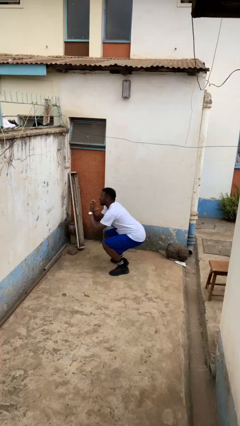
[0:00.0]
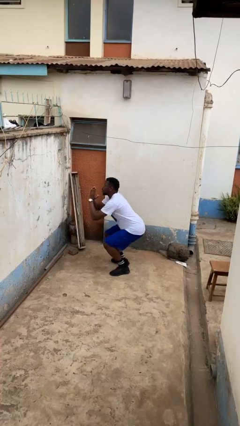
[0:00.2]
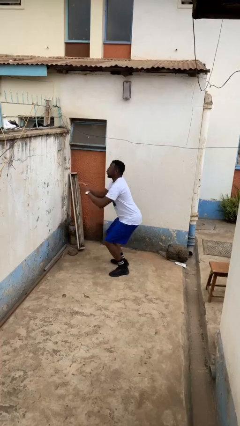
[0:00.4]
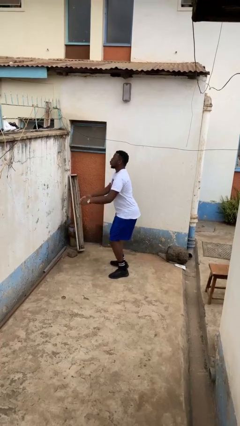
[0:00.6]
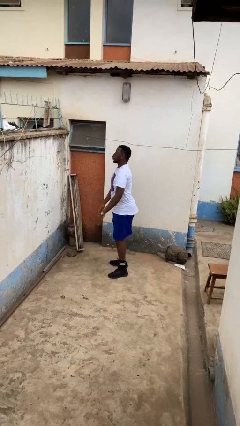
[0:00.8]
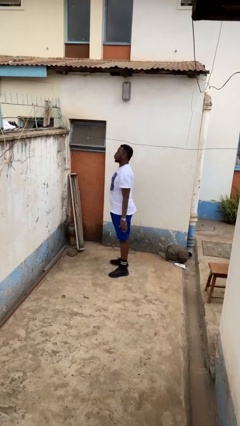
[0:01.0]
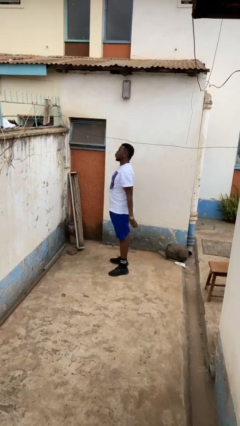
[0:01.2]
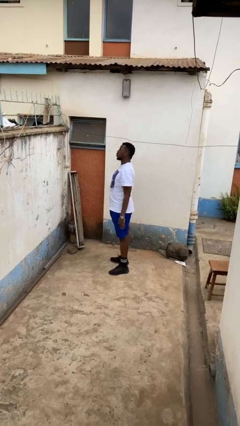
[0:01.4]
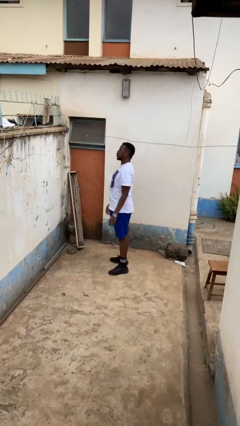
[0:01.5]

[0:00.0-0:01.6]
person stands up

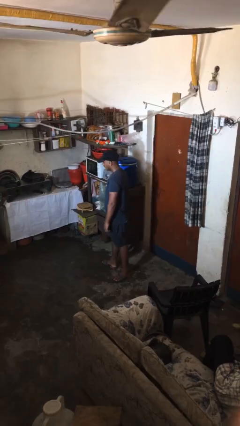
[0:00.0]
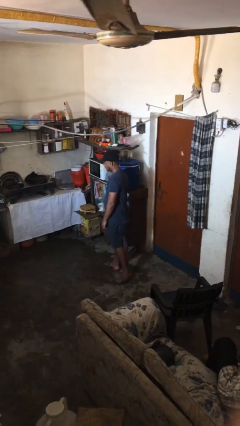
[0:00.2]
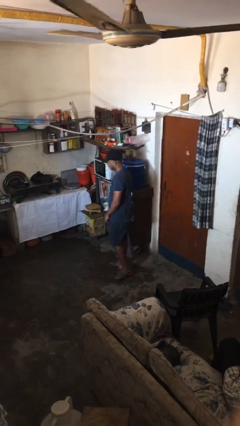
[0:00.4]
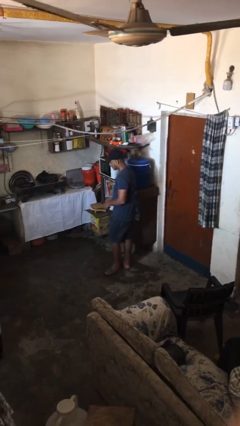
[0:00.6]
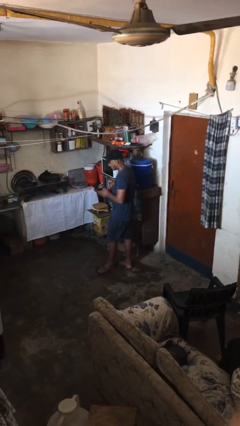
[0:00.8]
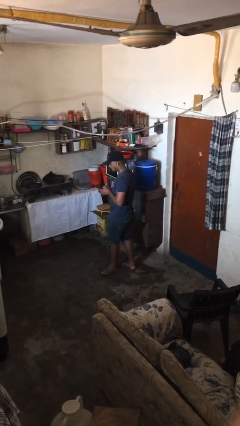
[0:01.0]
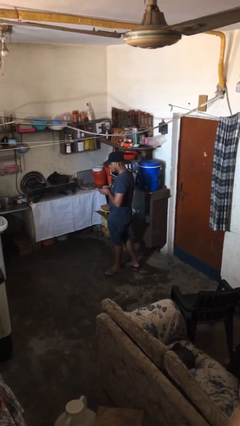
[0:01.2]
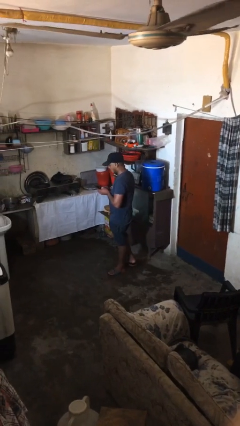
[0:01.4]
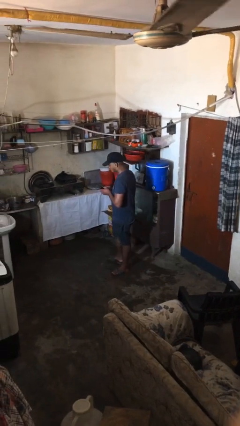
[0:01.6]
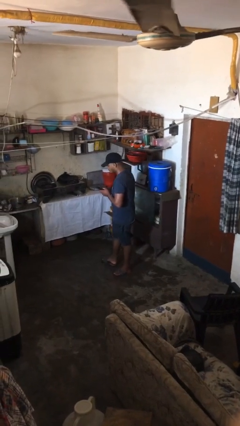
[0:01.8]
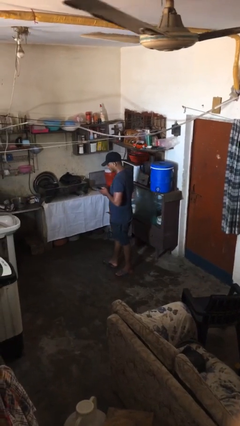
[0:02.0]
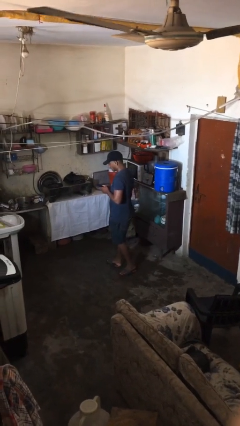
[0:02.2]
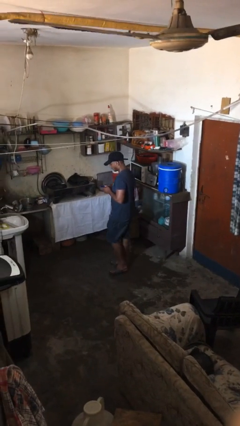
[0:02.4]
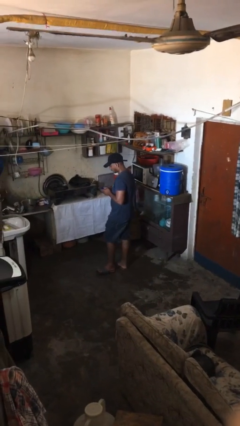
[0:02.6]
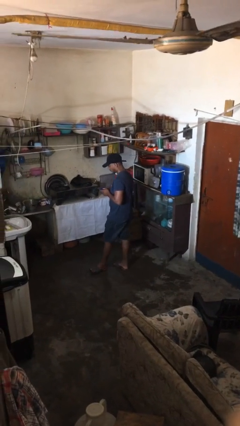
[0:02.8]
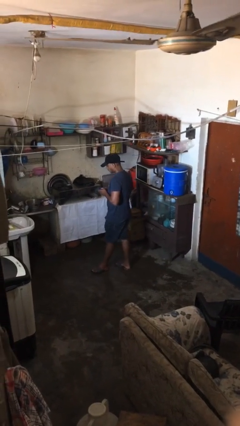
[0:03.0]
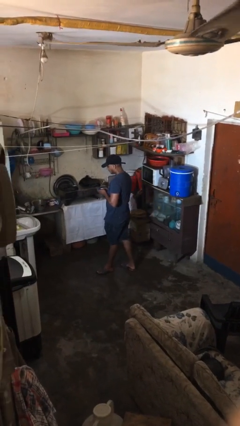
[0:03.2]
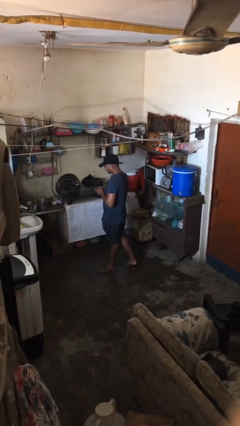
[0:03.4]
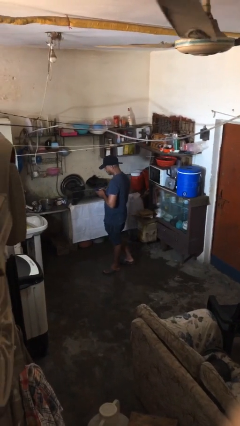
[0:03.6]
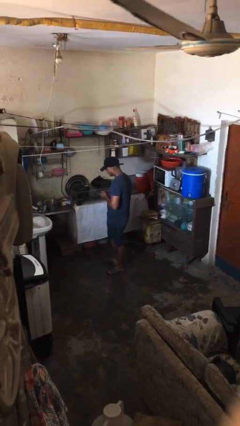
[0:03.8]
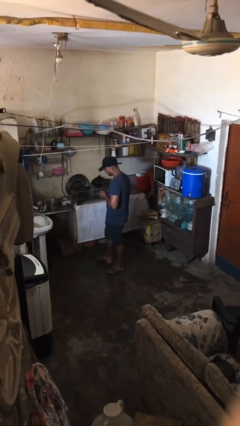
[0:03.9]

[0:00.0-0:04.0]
person texts on phone

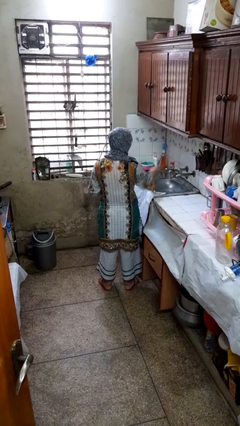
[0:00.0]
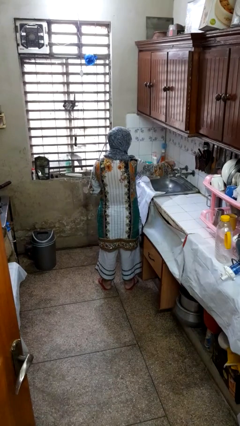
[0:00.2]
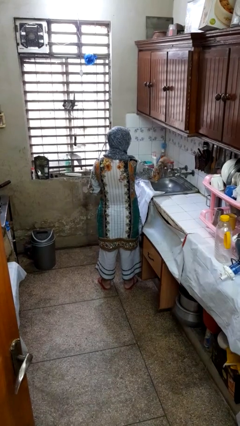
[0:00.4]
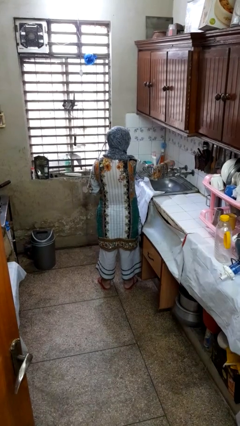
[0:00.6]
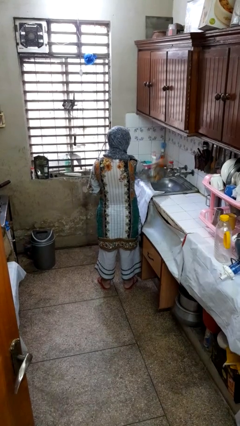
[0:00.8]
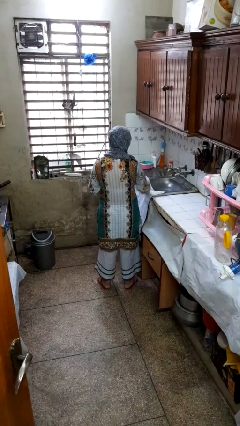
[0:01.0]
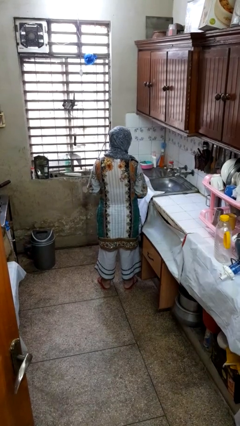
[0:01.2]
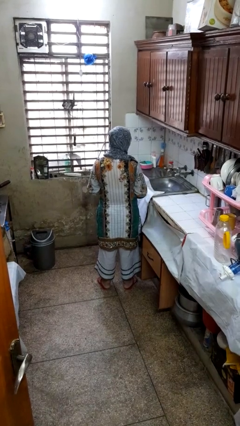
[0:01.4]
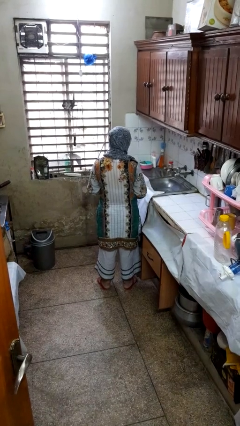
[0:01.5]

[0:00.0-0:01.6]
person turns off faucet

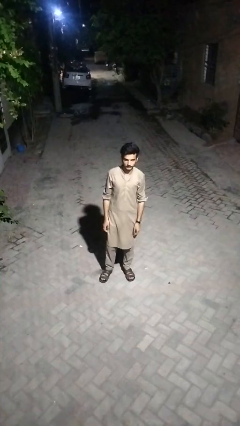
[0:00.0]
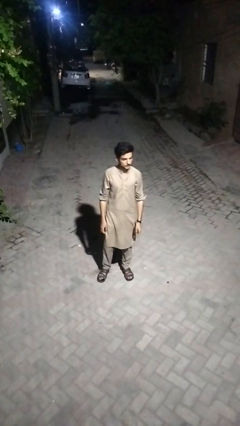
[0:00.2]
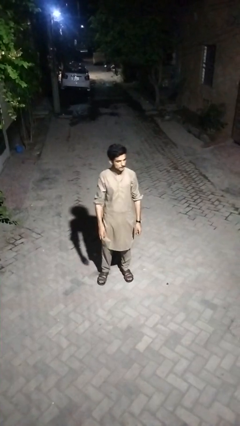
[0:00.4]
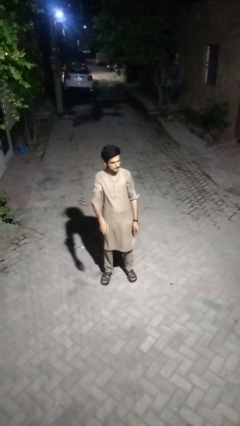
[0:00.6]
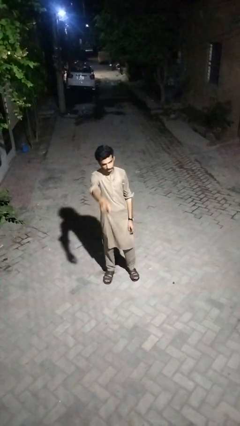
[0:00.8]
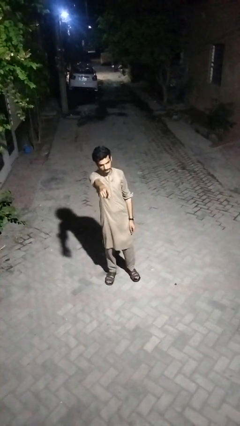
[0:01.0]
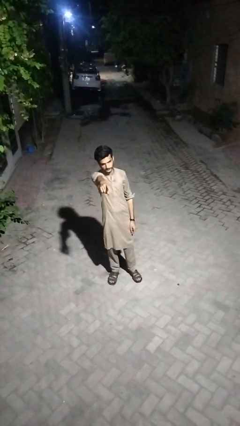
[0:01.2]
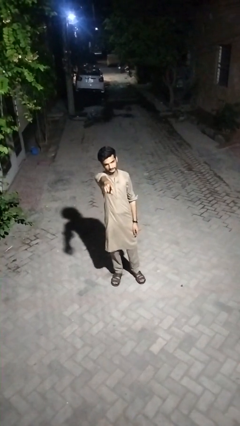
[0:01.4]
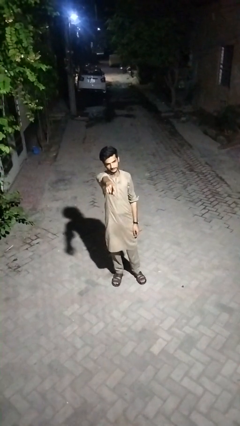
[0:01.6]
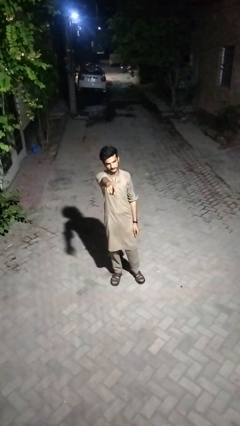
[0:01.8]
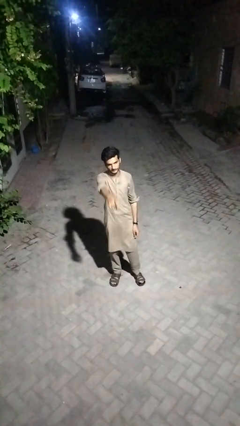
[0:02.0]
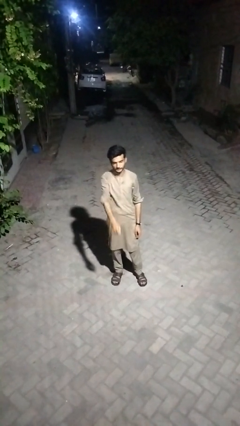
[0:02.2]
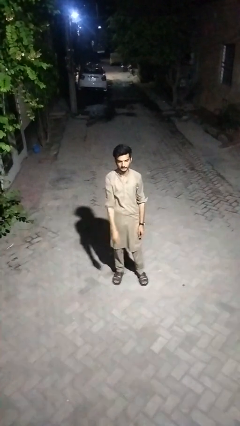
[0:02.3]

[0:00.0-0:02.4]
person points at person

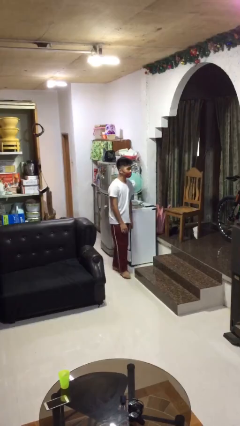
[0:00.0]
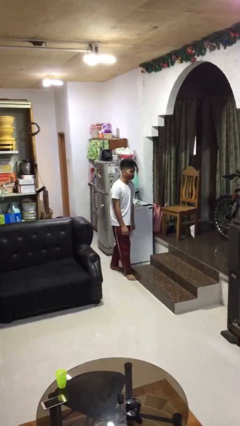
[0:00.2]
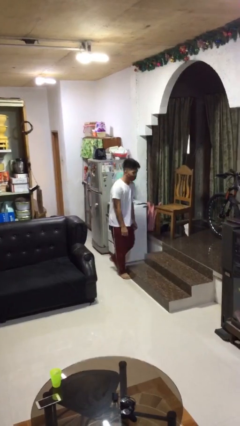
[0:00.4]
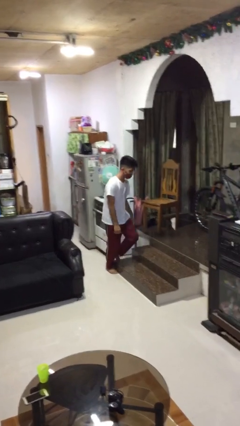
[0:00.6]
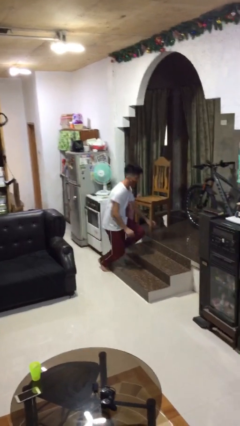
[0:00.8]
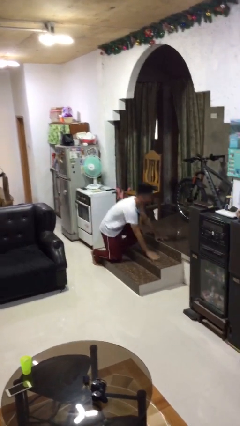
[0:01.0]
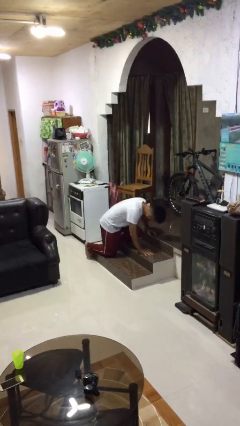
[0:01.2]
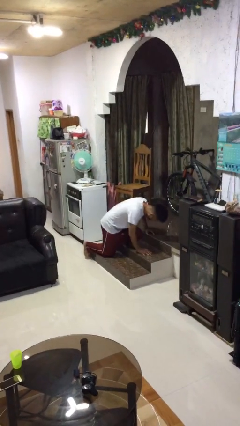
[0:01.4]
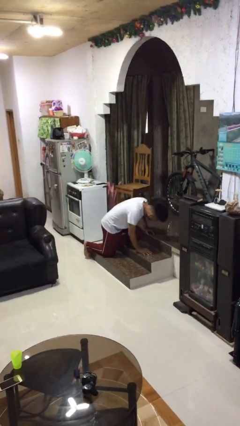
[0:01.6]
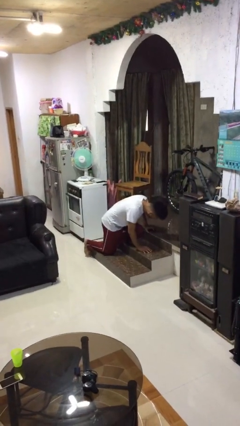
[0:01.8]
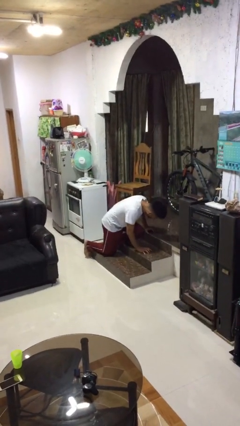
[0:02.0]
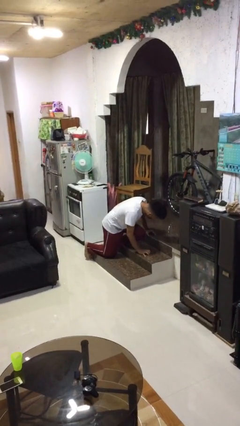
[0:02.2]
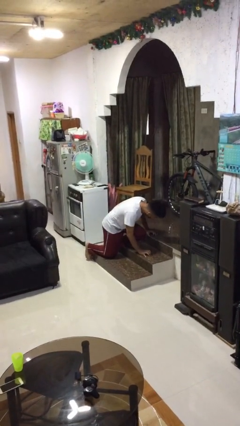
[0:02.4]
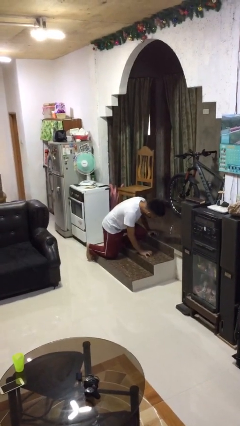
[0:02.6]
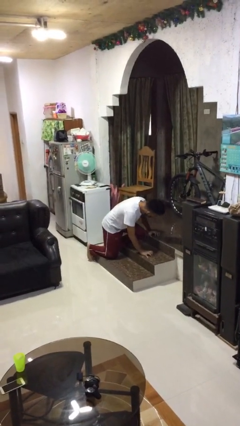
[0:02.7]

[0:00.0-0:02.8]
person trips on object on floor

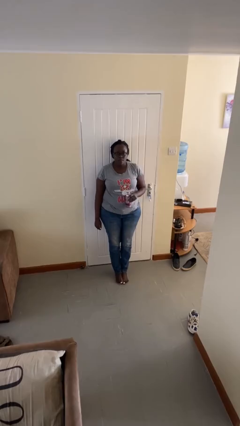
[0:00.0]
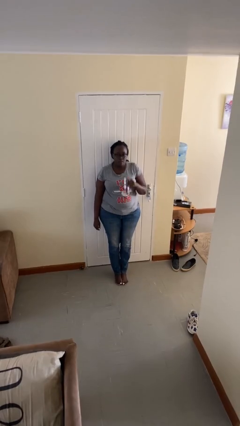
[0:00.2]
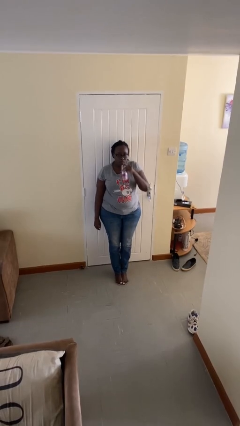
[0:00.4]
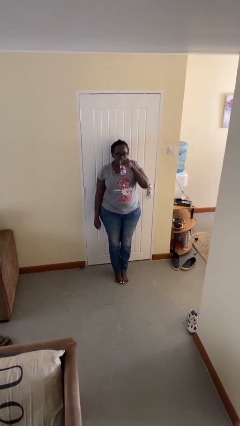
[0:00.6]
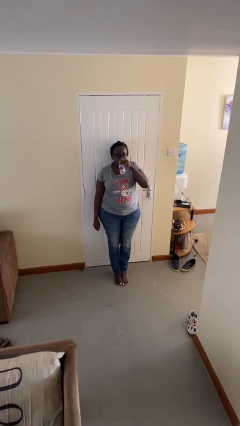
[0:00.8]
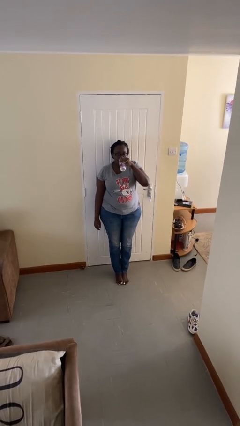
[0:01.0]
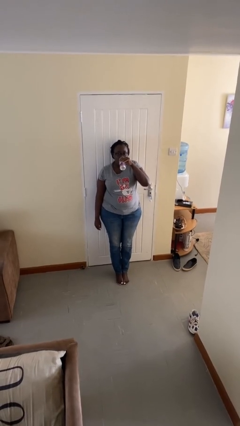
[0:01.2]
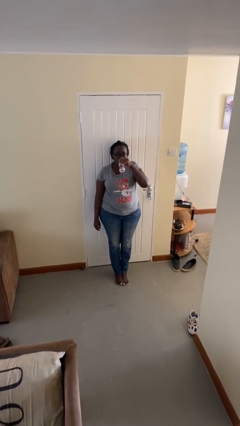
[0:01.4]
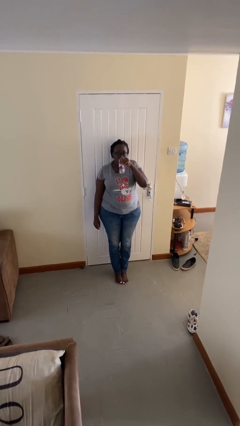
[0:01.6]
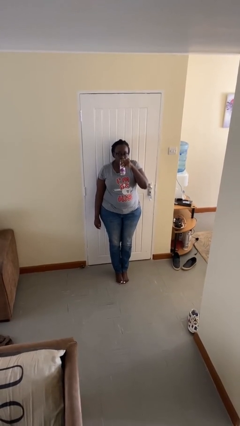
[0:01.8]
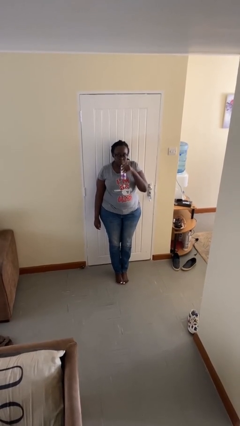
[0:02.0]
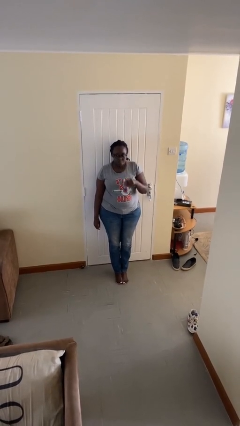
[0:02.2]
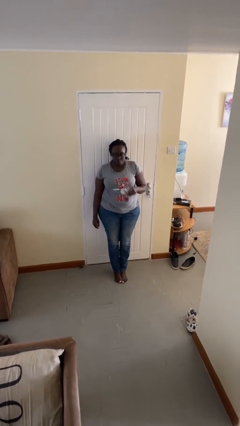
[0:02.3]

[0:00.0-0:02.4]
person drinks from beverage can

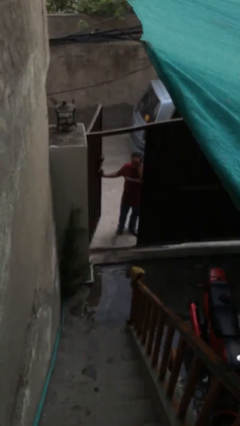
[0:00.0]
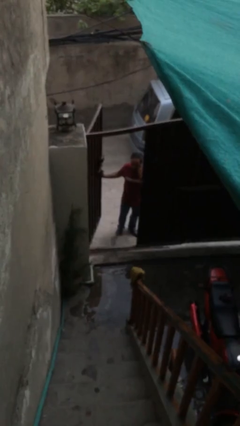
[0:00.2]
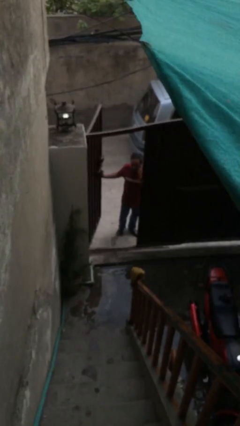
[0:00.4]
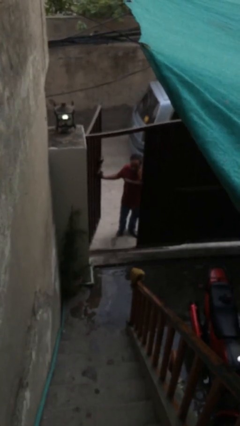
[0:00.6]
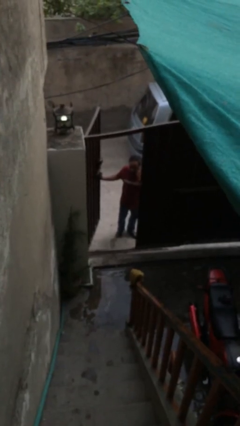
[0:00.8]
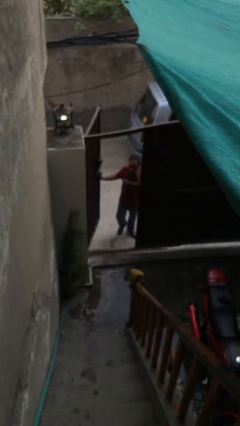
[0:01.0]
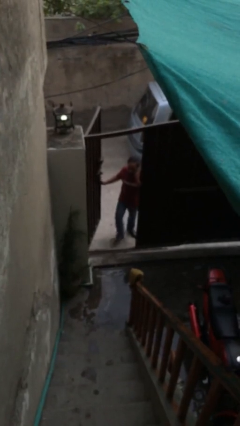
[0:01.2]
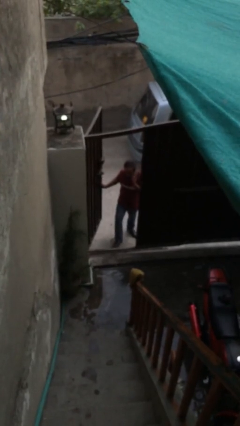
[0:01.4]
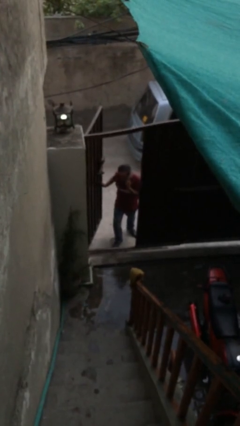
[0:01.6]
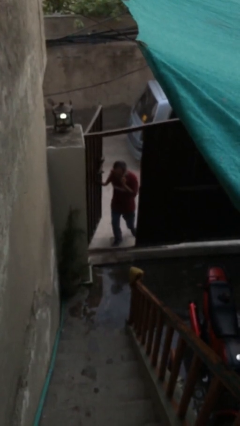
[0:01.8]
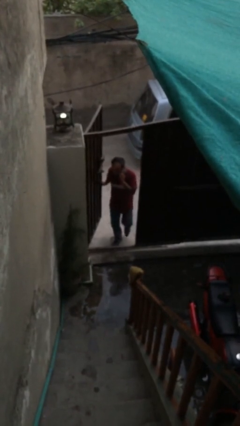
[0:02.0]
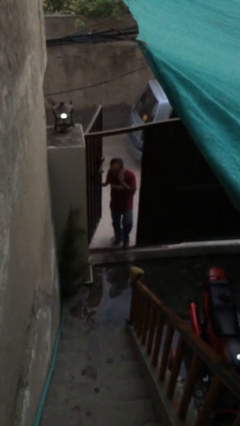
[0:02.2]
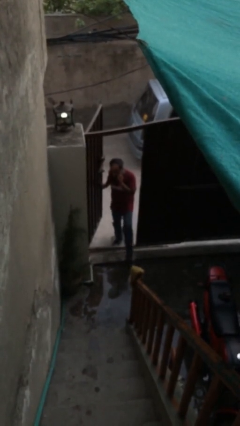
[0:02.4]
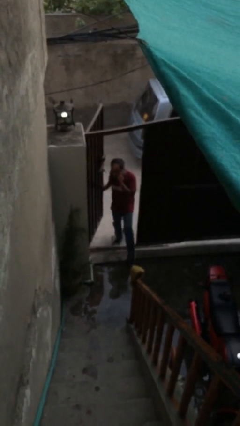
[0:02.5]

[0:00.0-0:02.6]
person enters scene through structure
